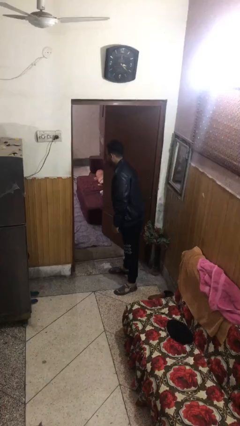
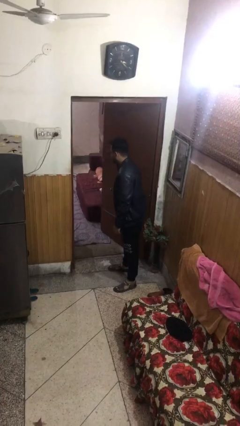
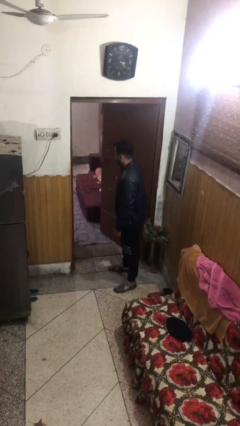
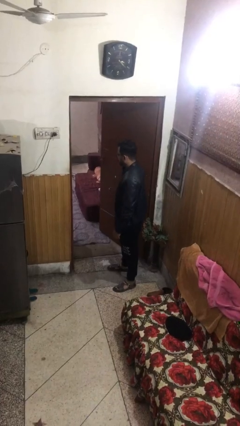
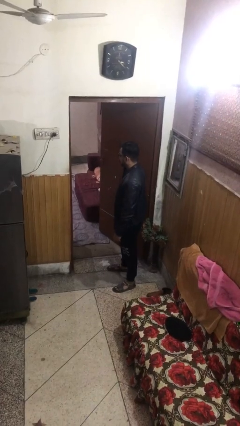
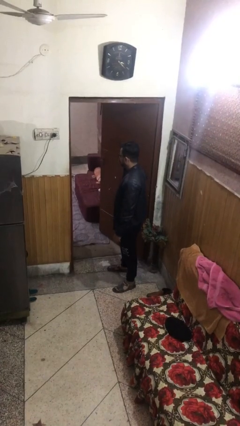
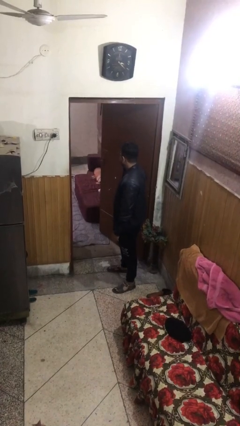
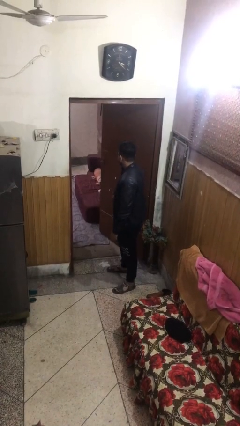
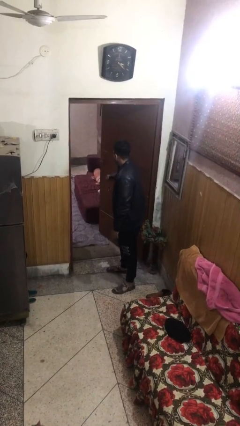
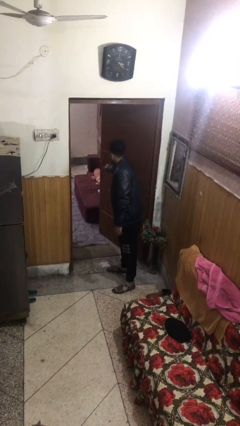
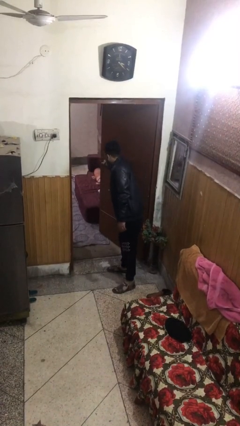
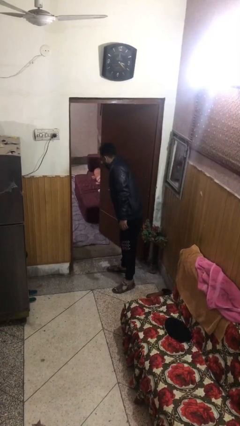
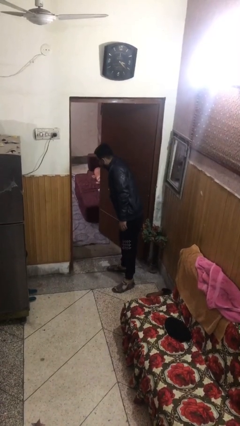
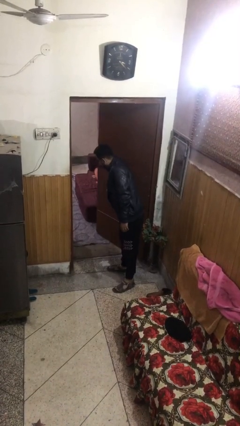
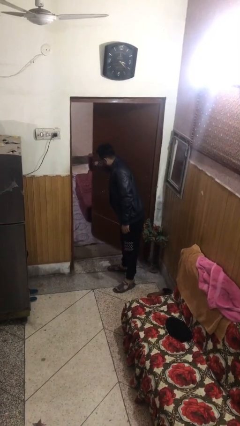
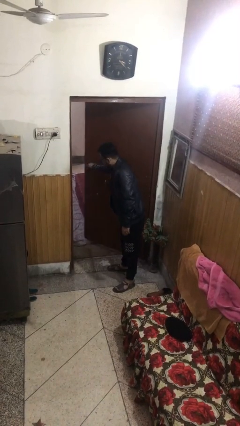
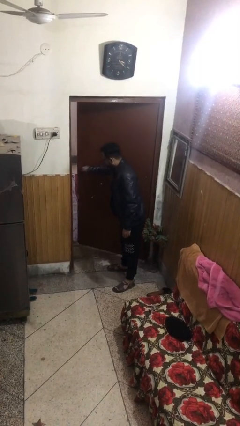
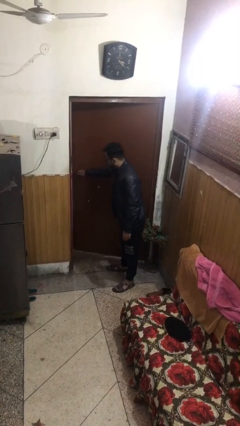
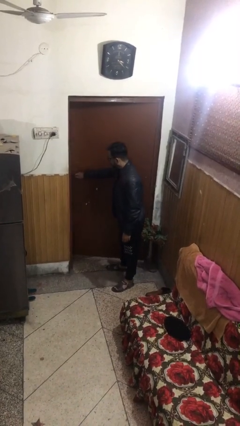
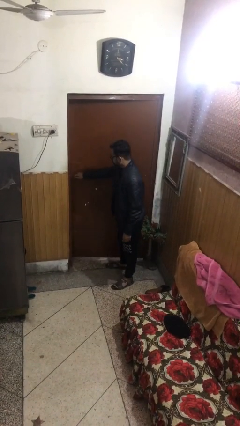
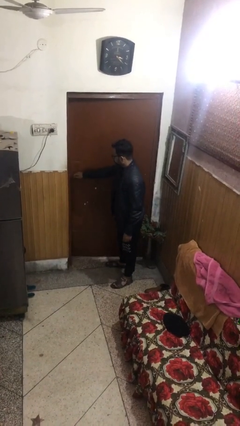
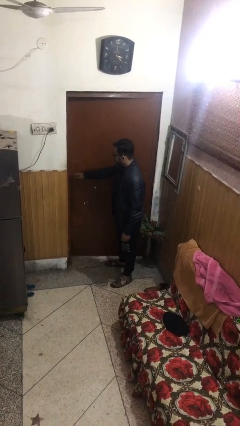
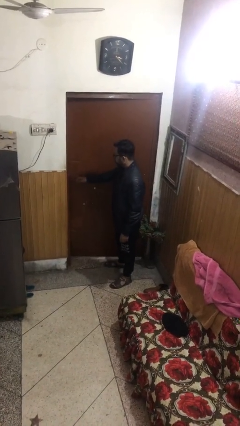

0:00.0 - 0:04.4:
person closes facility door

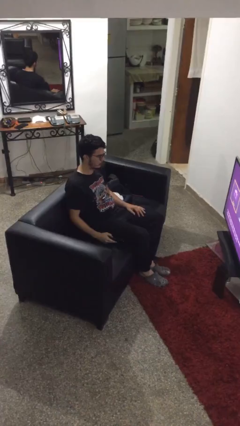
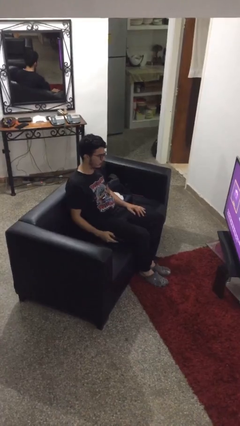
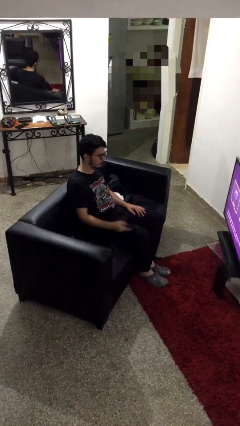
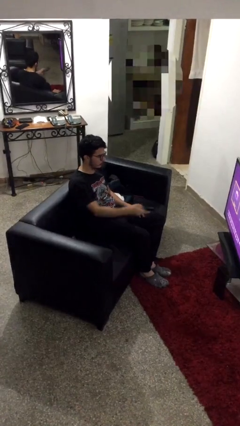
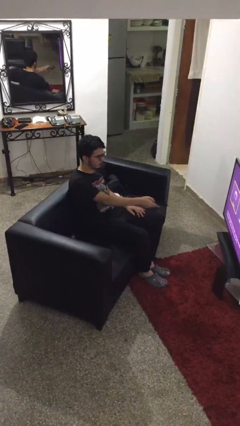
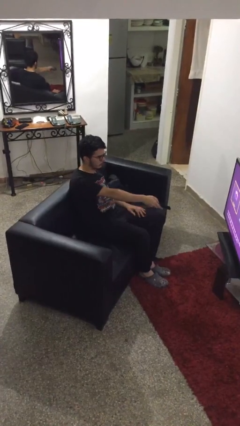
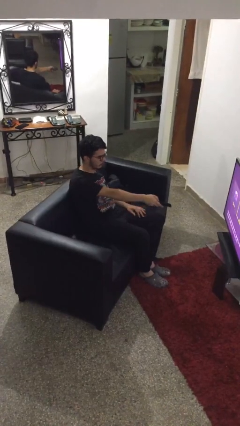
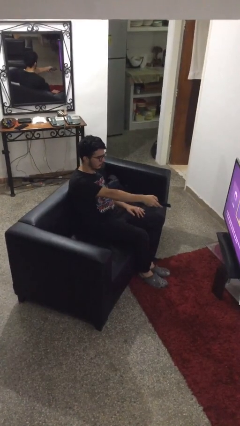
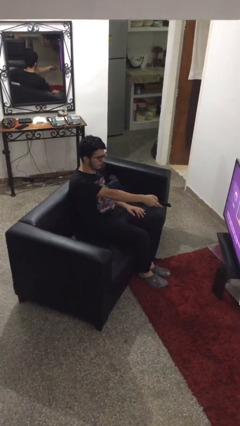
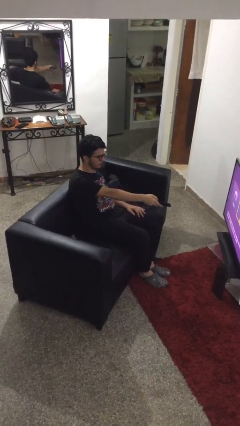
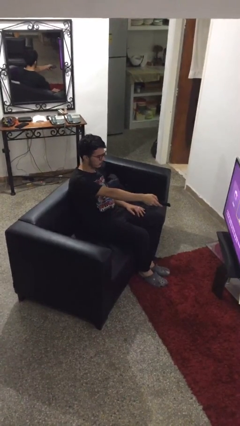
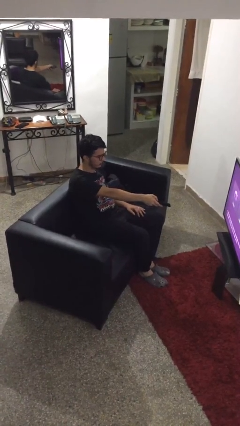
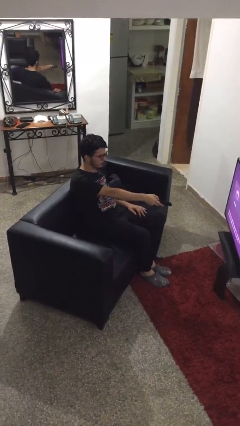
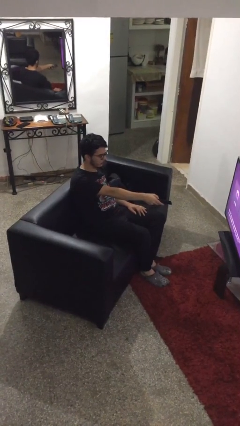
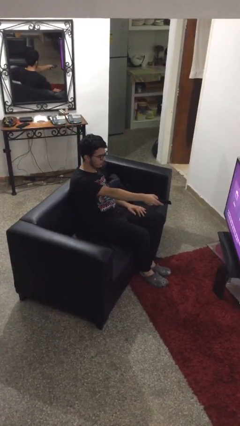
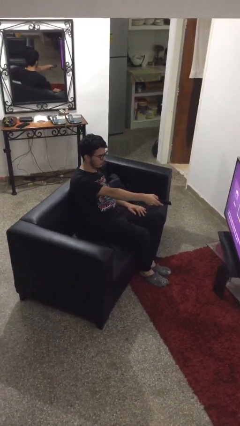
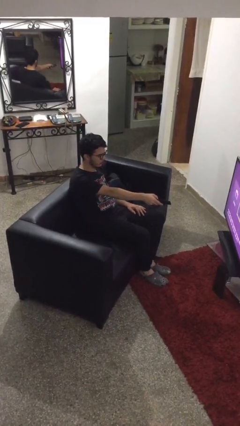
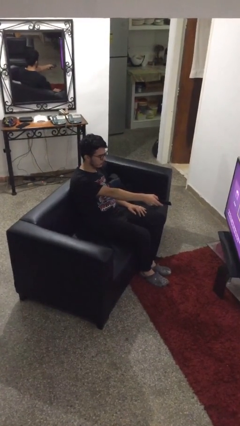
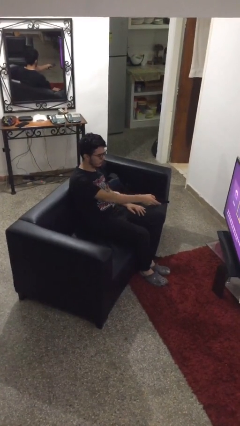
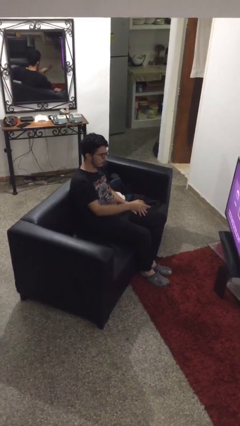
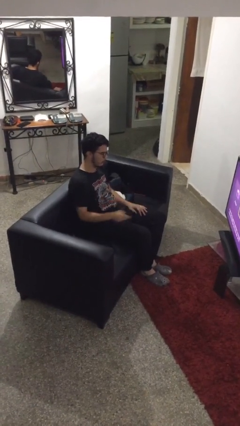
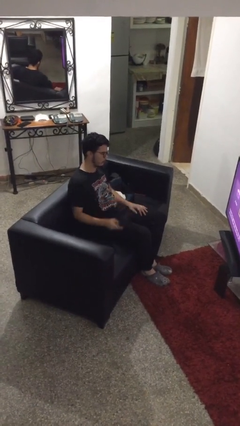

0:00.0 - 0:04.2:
person uses television remote

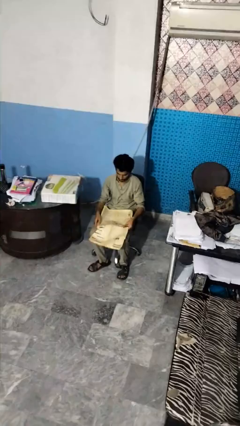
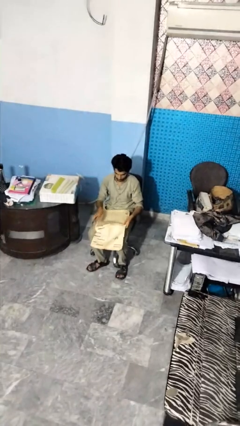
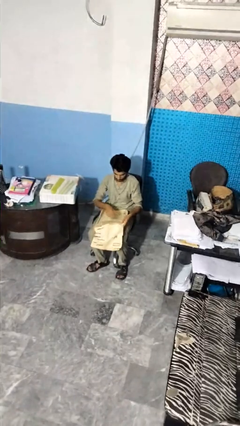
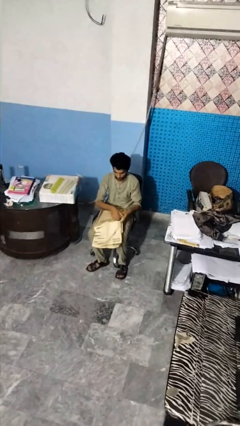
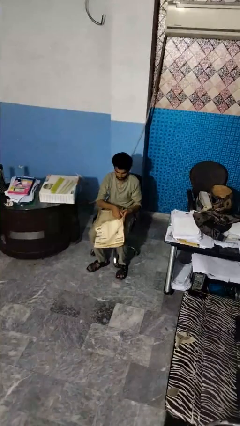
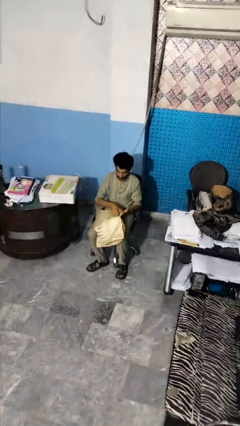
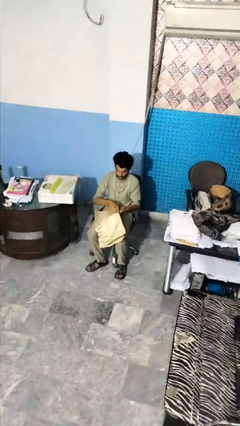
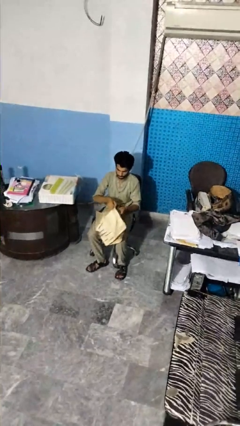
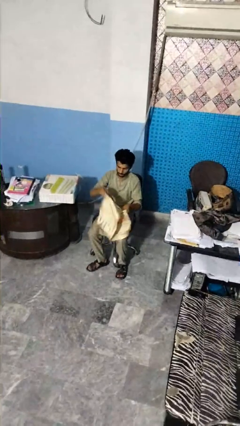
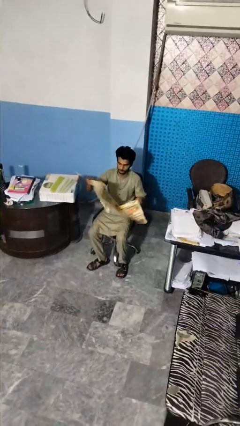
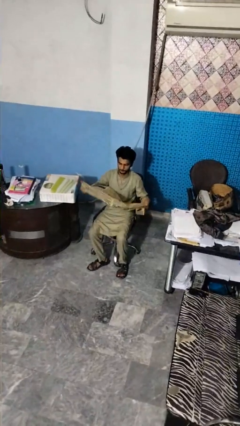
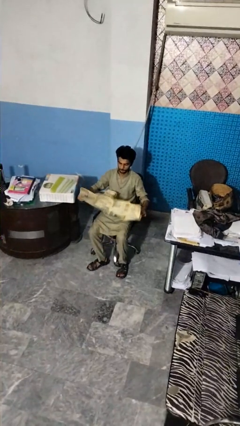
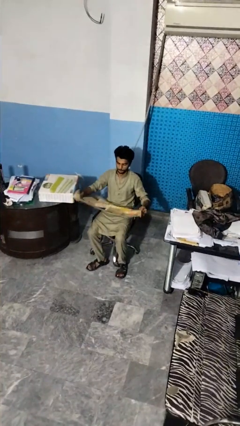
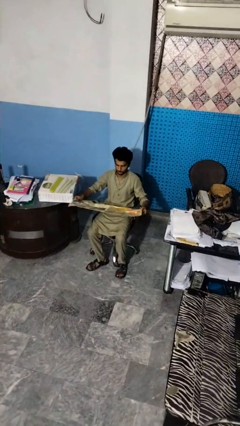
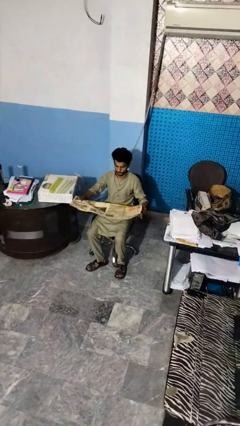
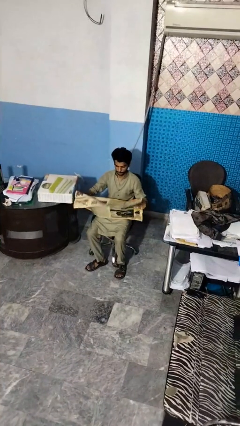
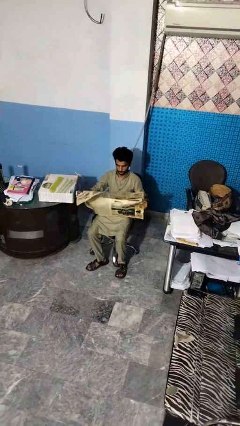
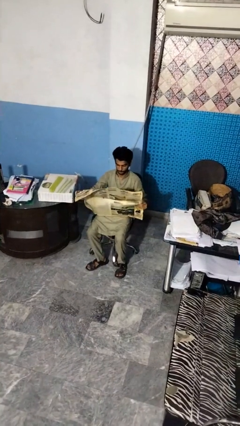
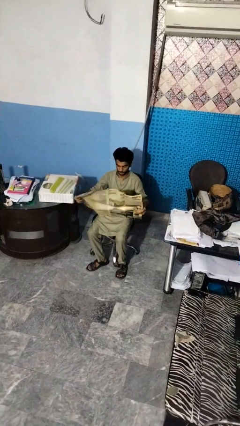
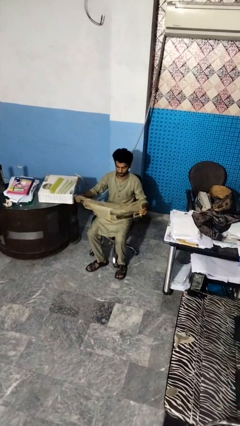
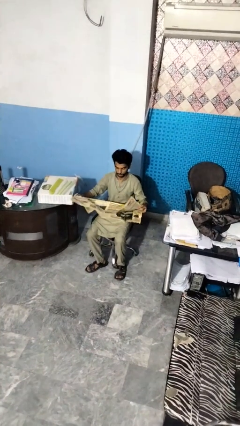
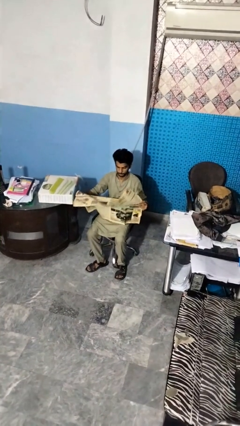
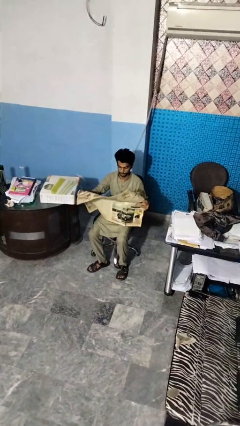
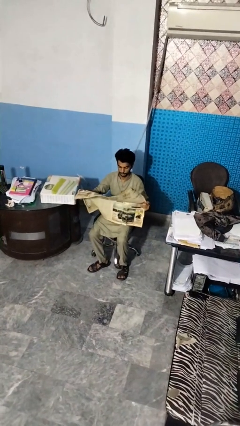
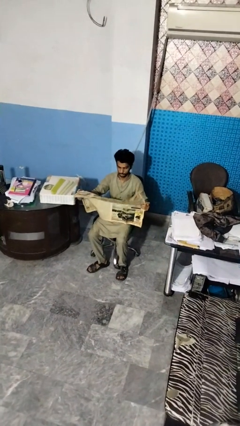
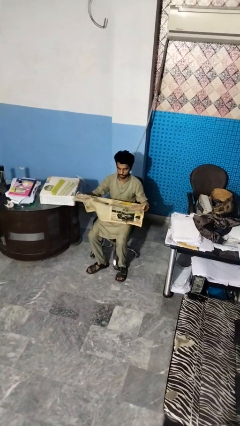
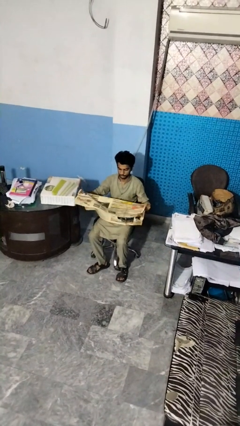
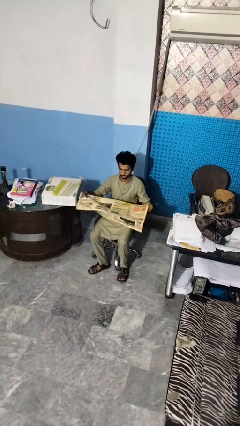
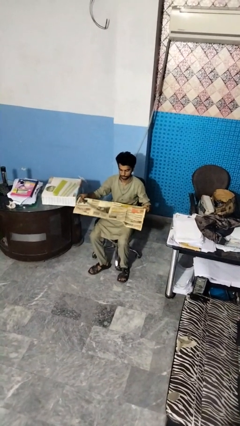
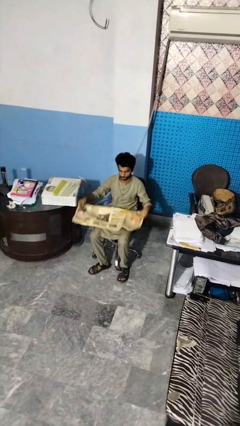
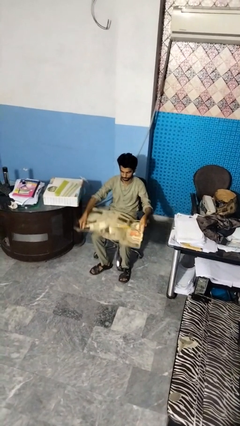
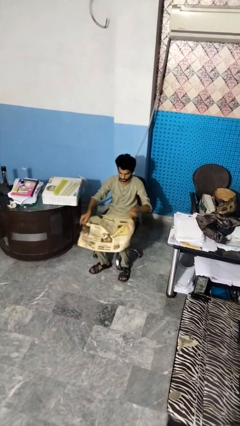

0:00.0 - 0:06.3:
person reads newspaper

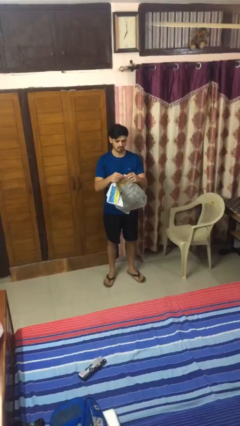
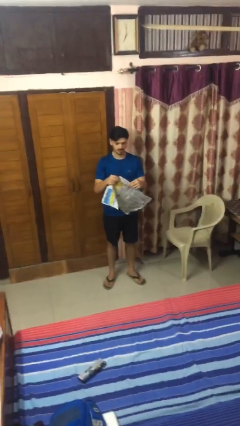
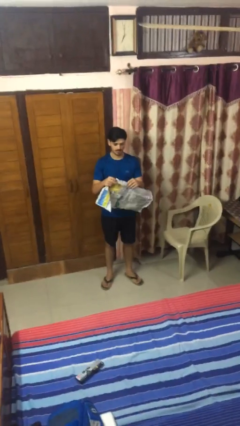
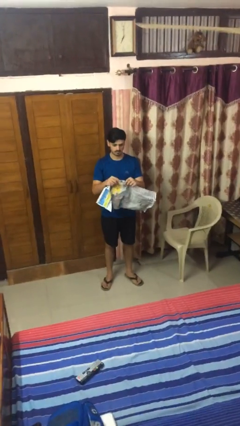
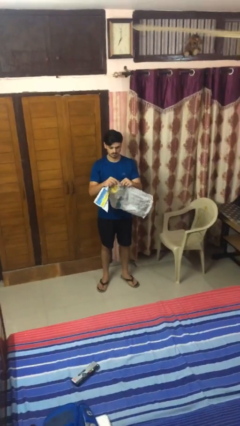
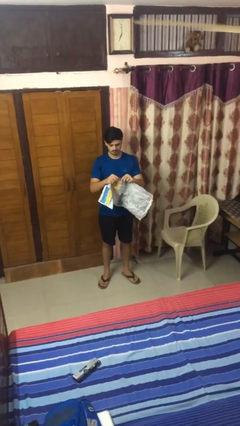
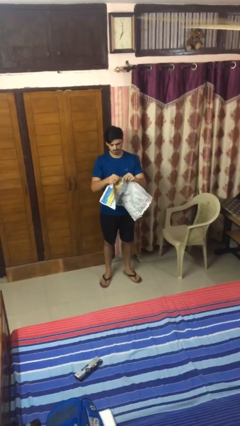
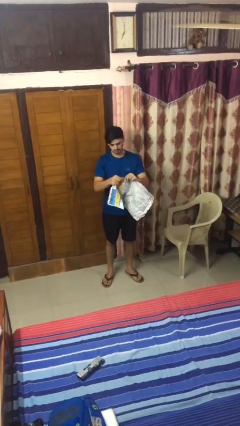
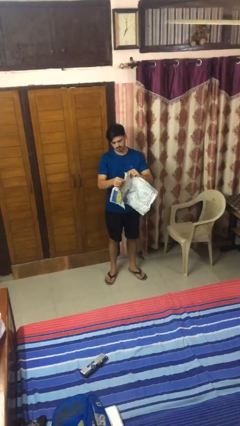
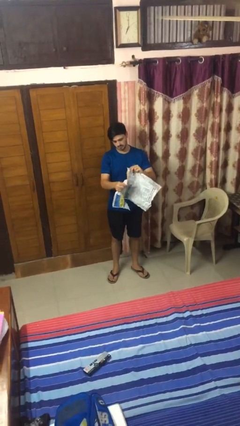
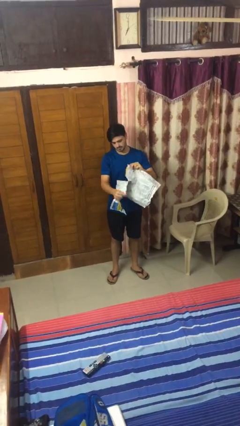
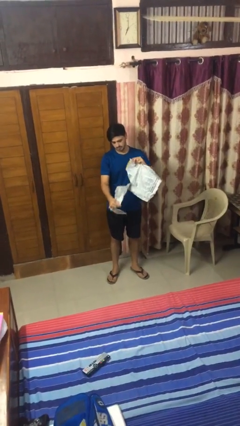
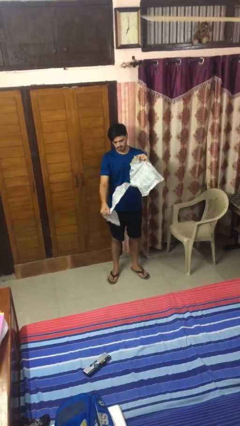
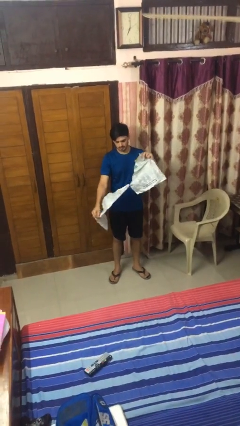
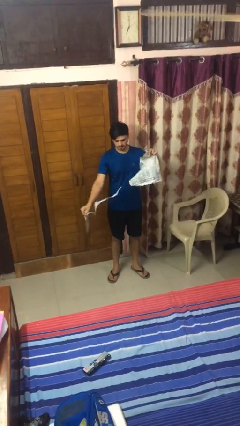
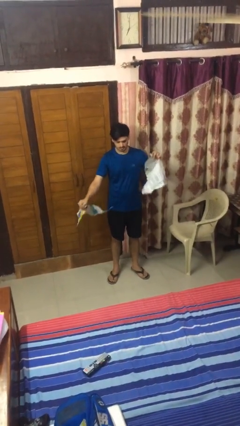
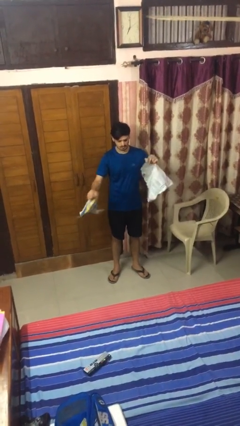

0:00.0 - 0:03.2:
person tears paper
